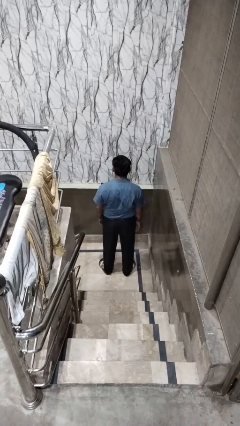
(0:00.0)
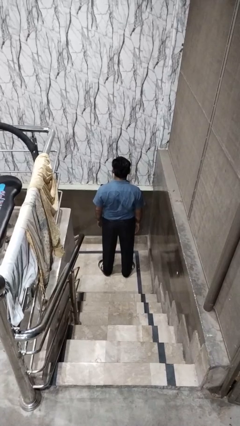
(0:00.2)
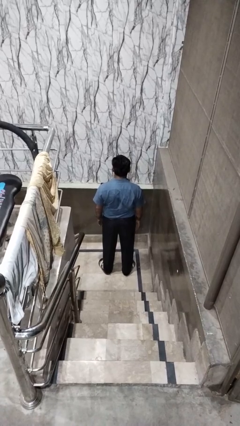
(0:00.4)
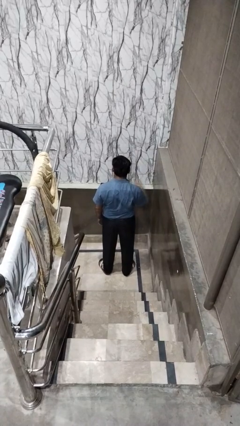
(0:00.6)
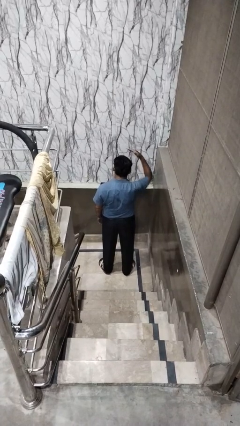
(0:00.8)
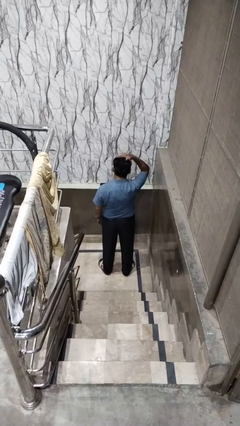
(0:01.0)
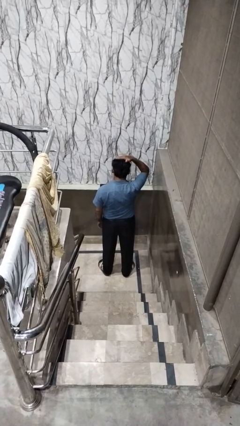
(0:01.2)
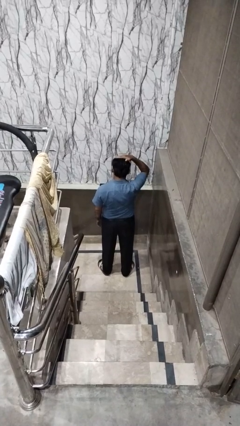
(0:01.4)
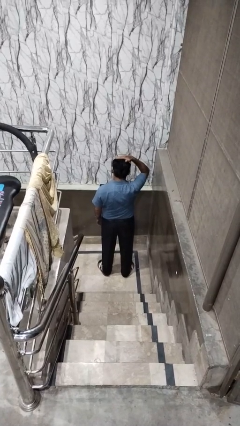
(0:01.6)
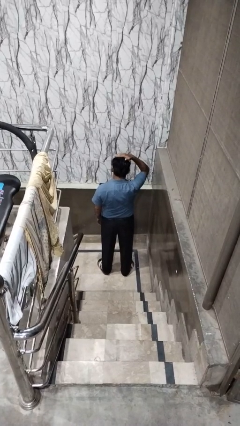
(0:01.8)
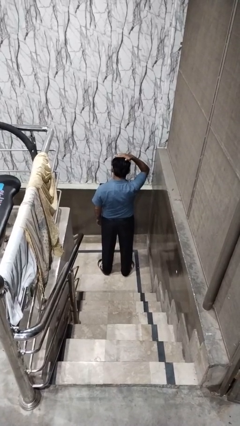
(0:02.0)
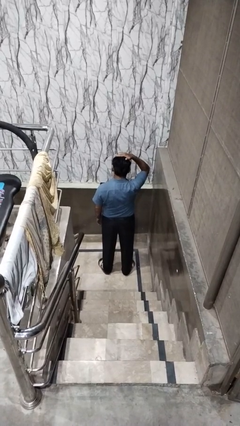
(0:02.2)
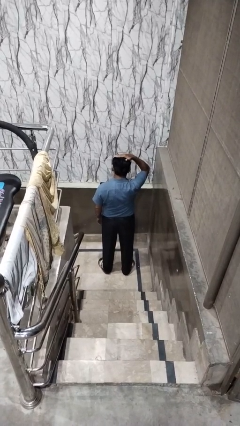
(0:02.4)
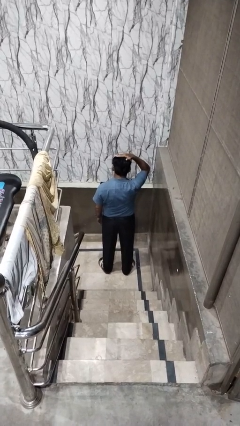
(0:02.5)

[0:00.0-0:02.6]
person pats head

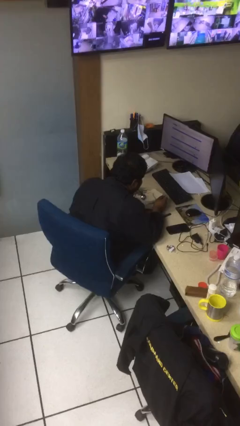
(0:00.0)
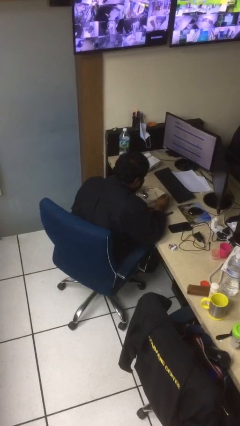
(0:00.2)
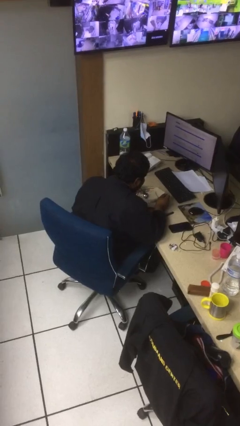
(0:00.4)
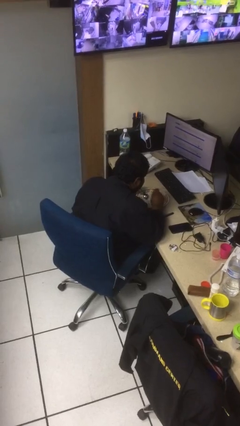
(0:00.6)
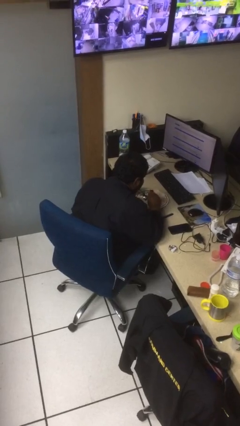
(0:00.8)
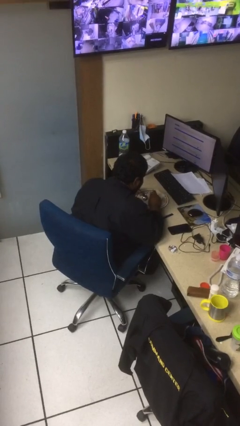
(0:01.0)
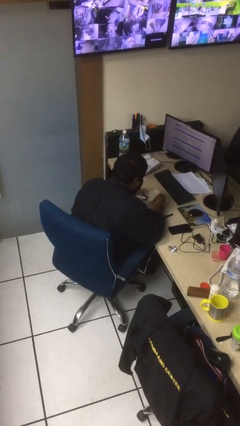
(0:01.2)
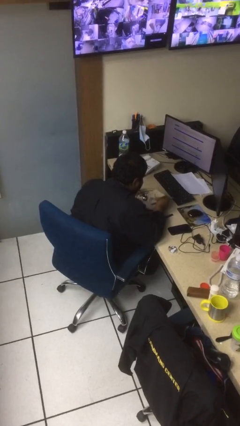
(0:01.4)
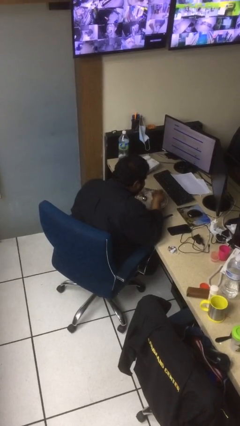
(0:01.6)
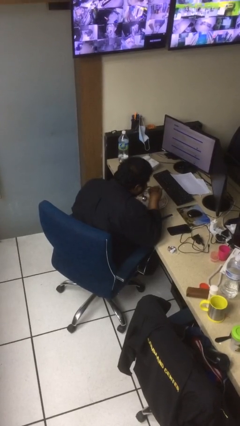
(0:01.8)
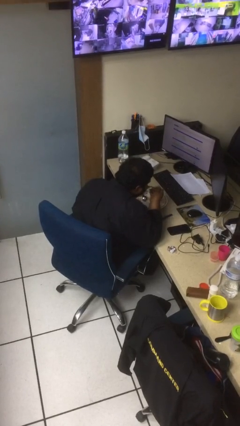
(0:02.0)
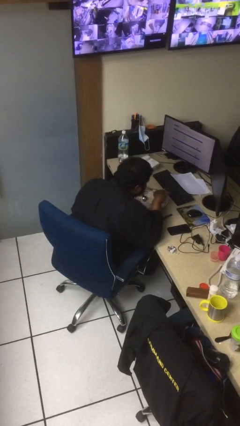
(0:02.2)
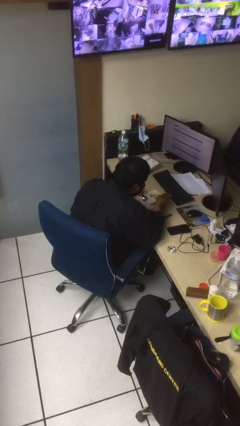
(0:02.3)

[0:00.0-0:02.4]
person eats with utensil

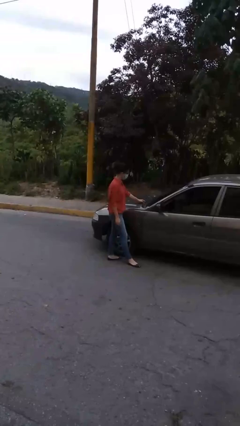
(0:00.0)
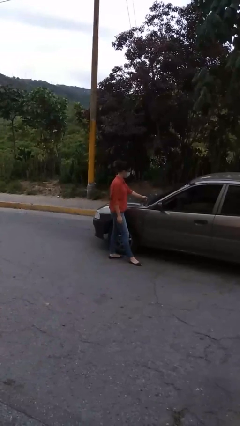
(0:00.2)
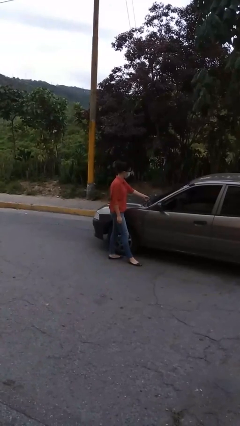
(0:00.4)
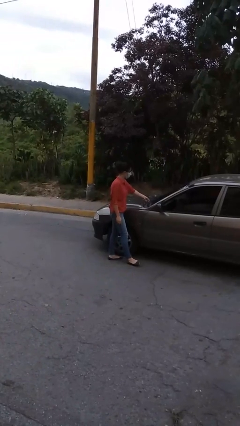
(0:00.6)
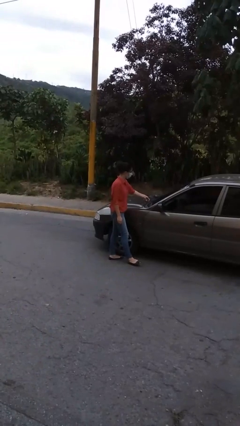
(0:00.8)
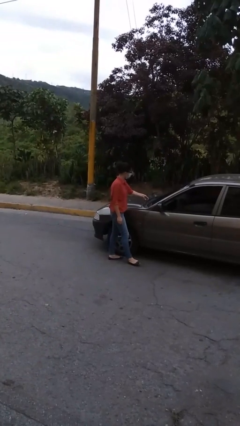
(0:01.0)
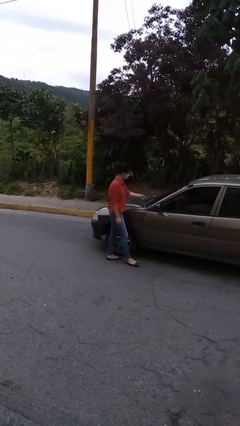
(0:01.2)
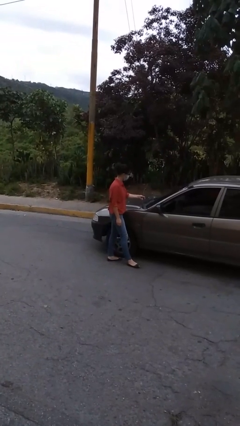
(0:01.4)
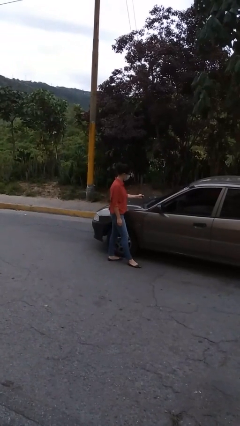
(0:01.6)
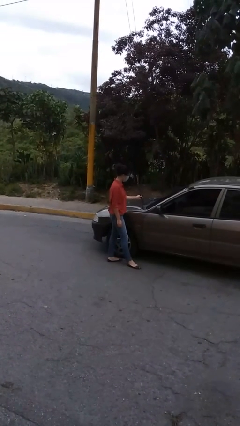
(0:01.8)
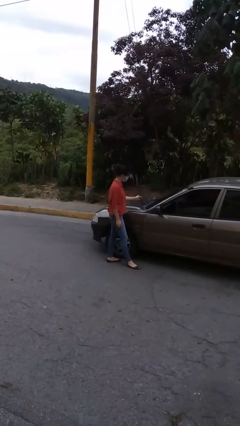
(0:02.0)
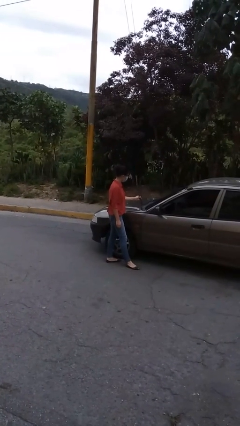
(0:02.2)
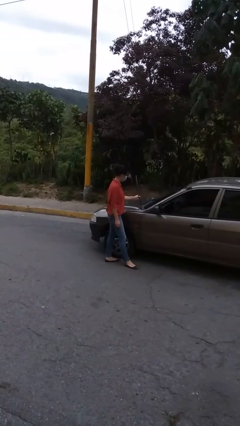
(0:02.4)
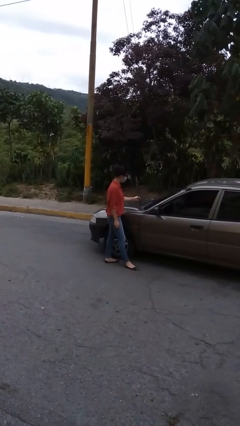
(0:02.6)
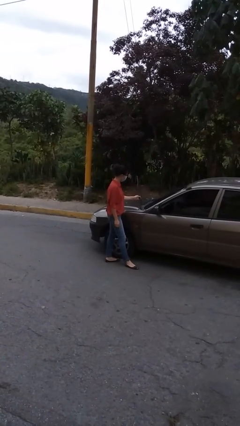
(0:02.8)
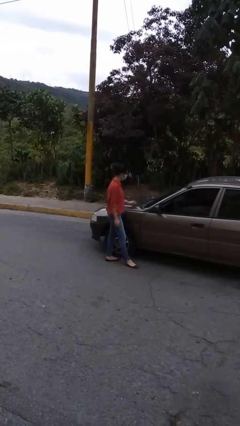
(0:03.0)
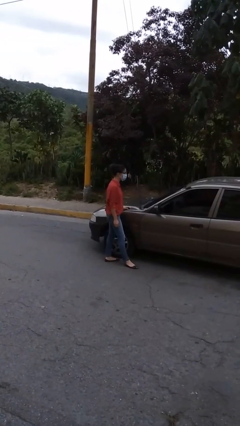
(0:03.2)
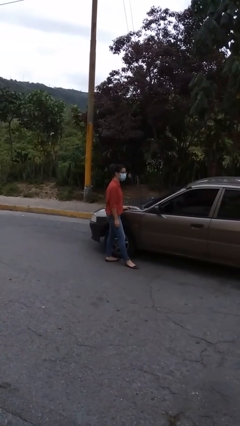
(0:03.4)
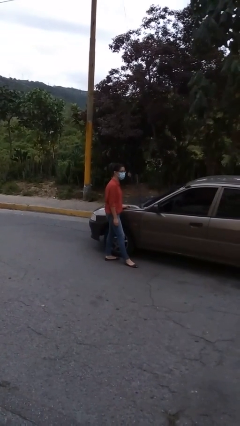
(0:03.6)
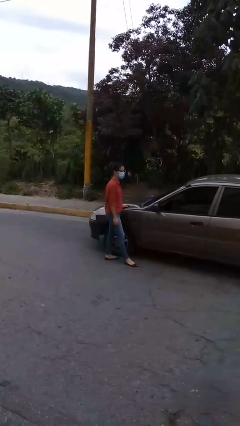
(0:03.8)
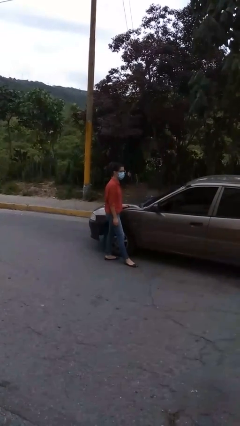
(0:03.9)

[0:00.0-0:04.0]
person flips up car wipers

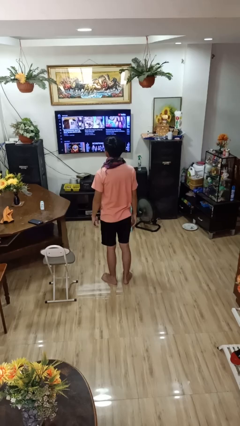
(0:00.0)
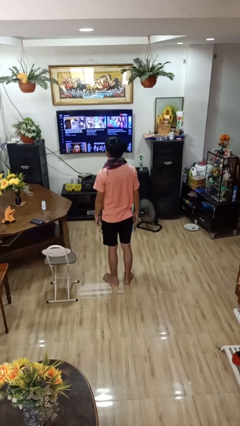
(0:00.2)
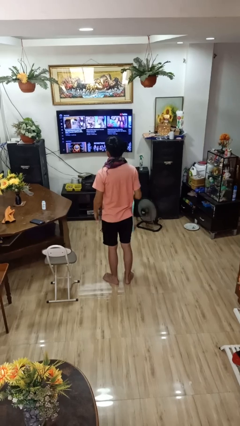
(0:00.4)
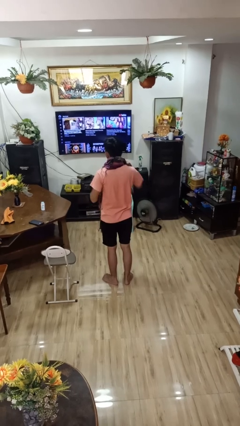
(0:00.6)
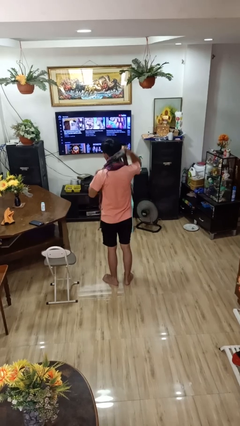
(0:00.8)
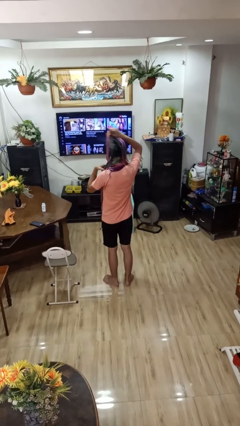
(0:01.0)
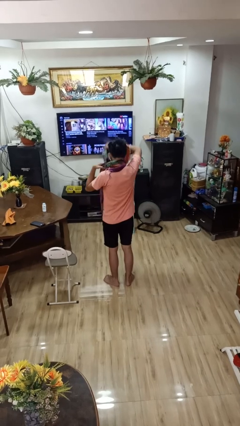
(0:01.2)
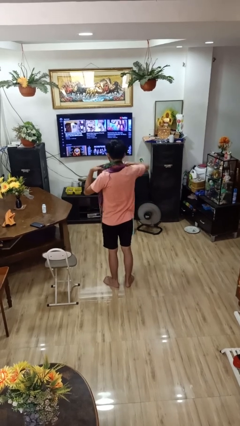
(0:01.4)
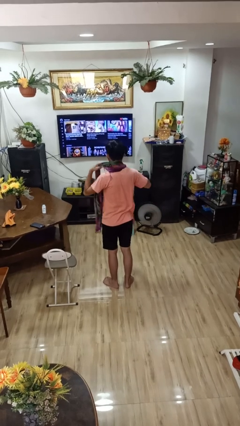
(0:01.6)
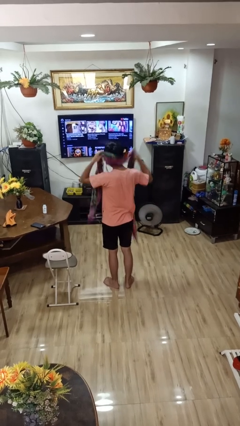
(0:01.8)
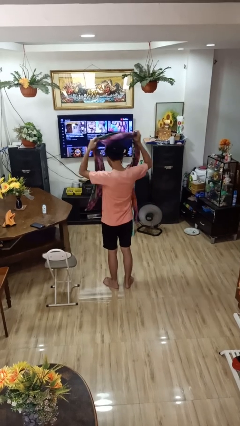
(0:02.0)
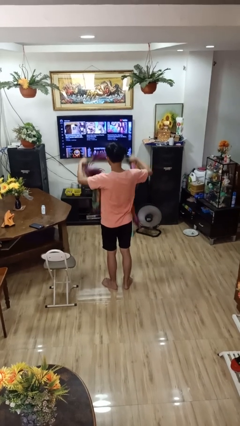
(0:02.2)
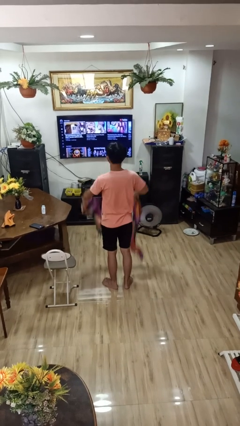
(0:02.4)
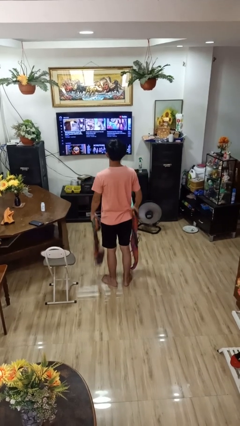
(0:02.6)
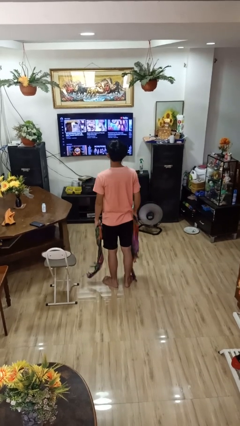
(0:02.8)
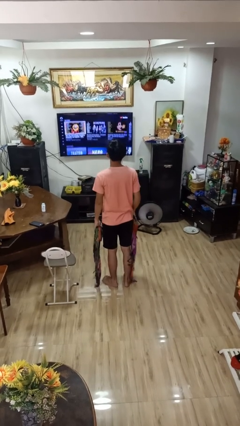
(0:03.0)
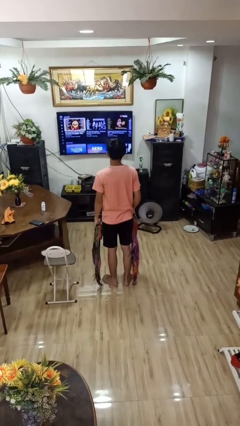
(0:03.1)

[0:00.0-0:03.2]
person takes off scarf

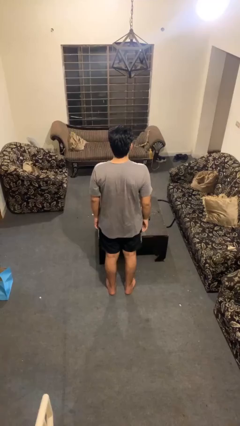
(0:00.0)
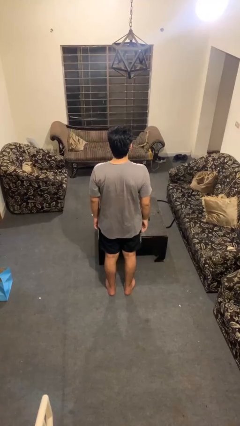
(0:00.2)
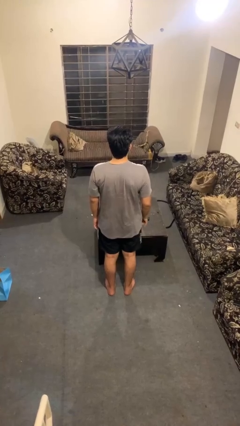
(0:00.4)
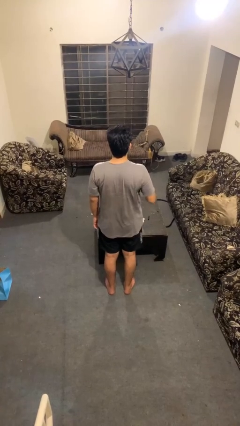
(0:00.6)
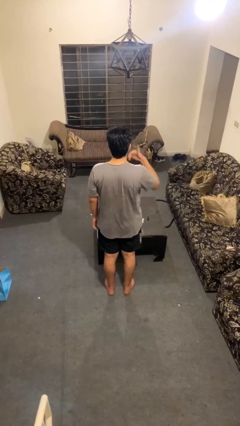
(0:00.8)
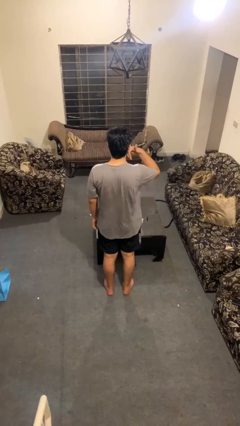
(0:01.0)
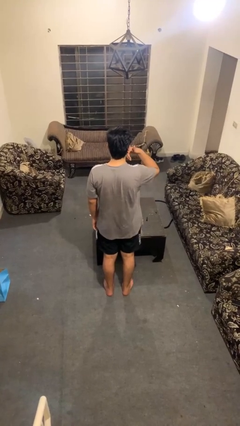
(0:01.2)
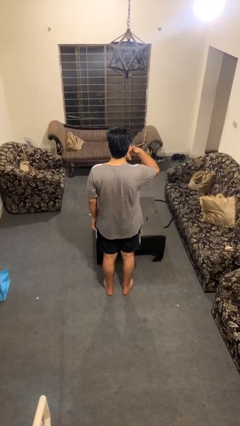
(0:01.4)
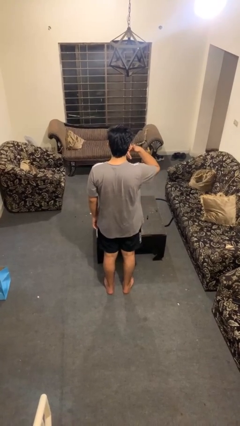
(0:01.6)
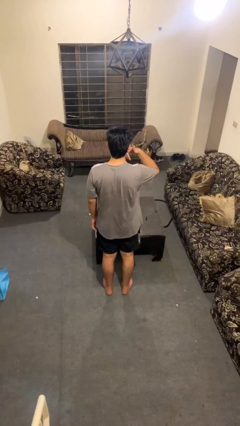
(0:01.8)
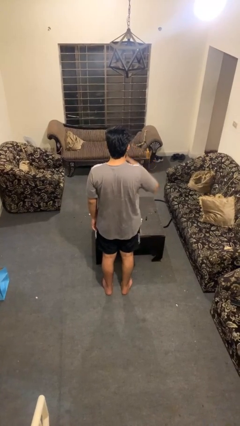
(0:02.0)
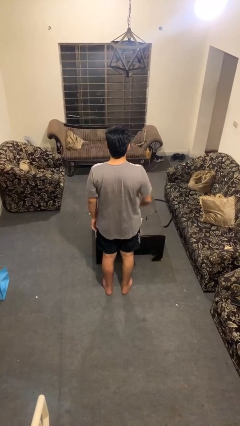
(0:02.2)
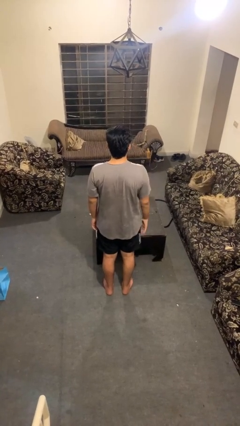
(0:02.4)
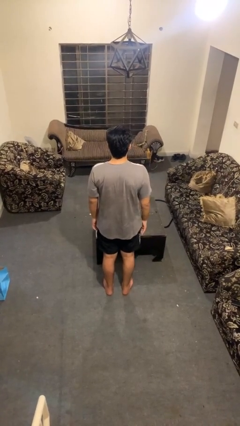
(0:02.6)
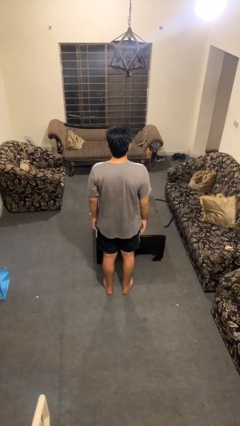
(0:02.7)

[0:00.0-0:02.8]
person gestures call me

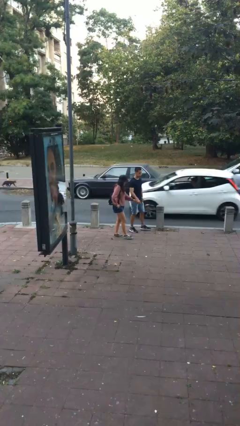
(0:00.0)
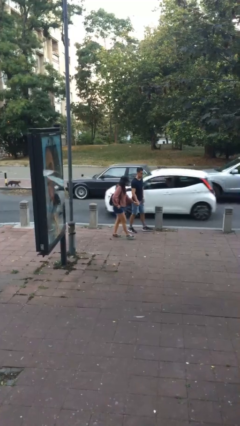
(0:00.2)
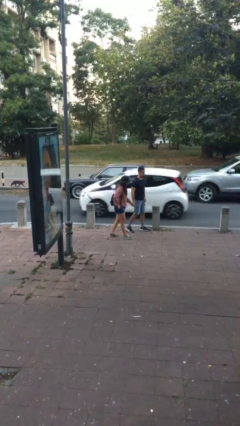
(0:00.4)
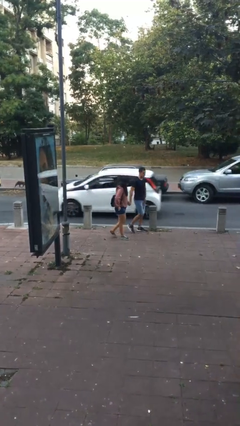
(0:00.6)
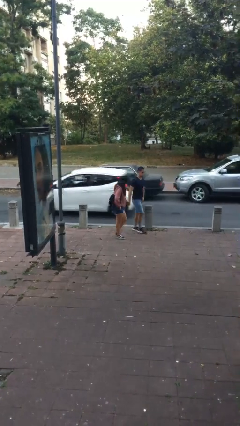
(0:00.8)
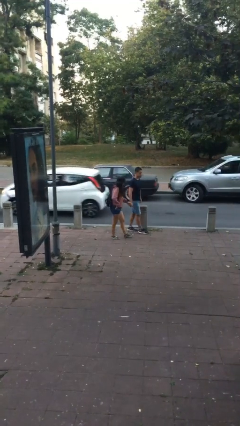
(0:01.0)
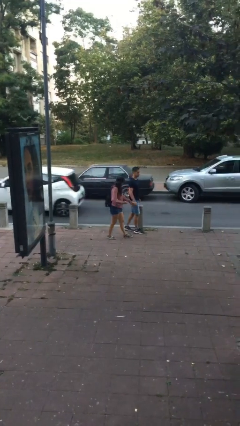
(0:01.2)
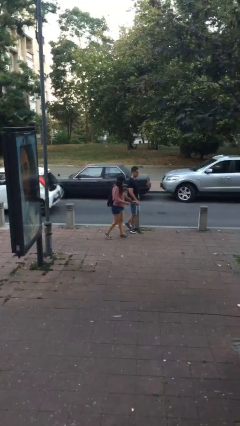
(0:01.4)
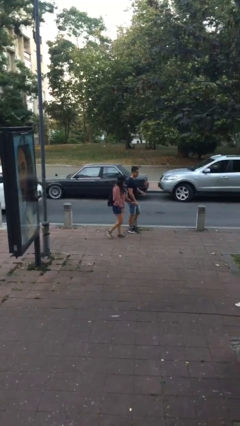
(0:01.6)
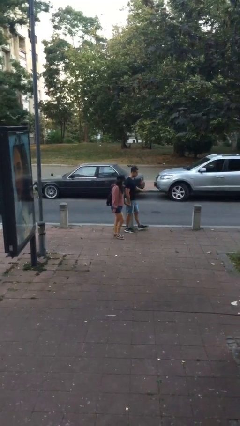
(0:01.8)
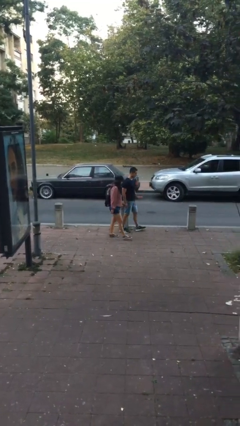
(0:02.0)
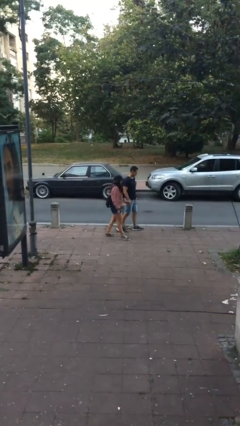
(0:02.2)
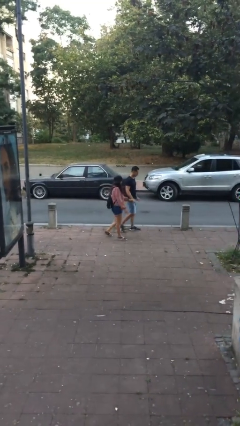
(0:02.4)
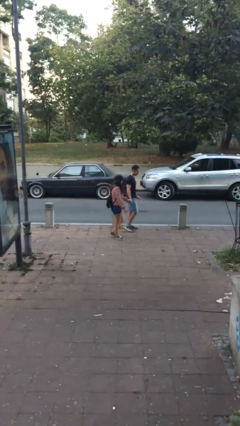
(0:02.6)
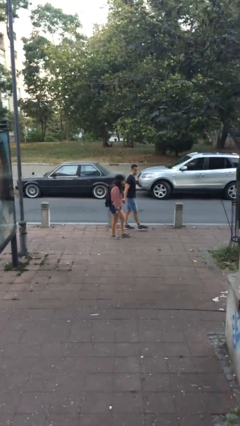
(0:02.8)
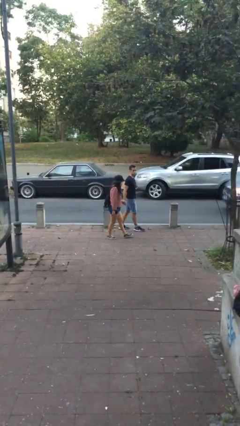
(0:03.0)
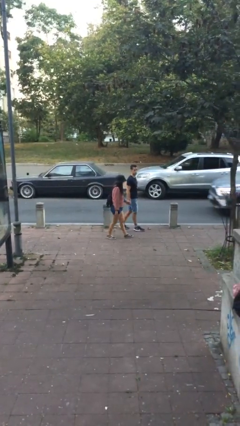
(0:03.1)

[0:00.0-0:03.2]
person holds hand
